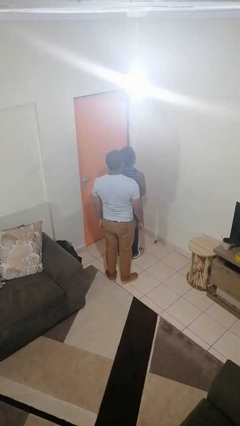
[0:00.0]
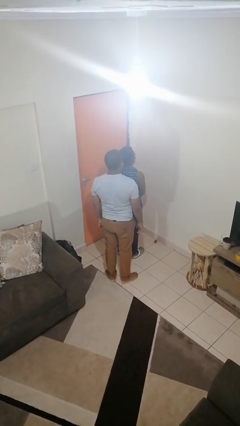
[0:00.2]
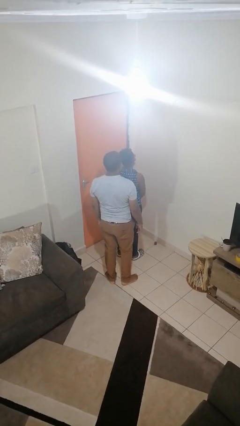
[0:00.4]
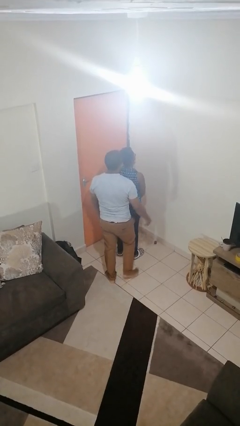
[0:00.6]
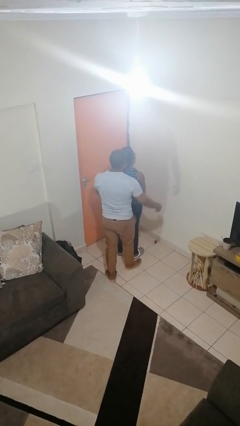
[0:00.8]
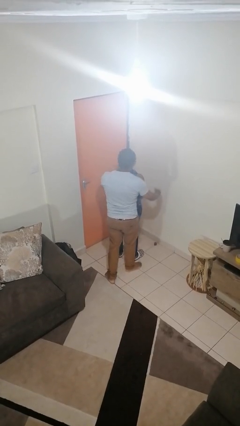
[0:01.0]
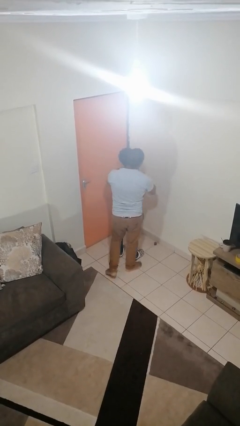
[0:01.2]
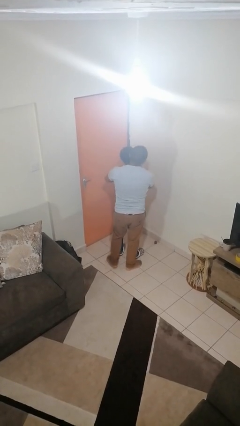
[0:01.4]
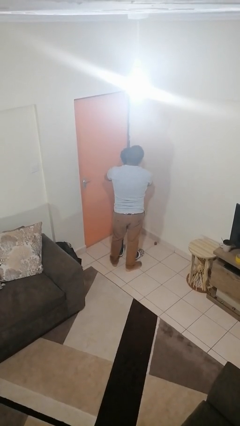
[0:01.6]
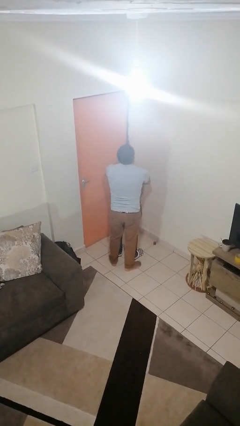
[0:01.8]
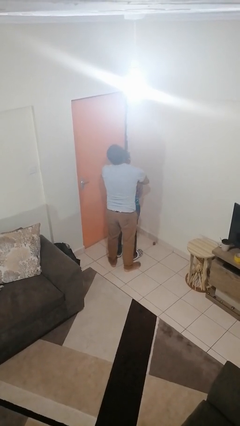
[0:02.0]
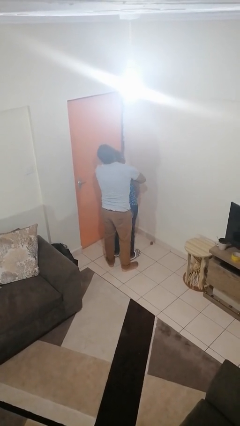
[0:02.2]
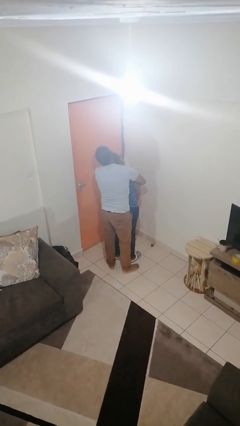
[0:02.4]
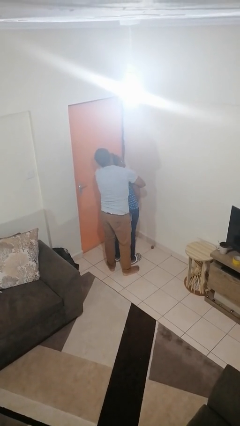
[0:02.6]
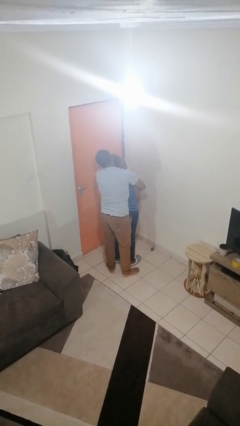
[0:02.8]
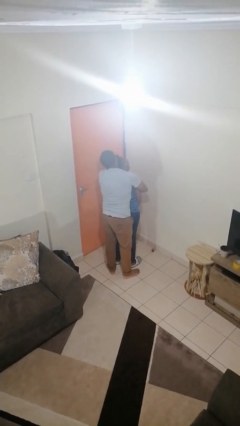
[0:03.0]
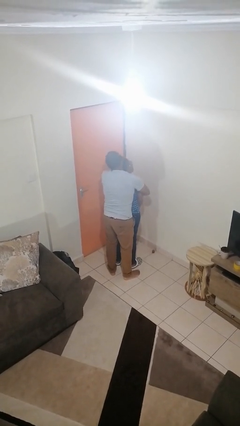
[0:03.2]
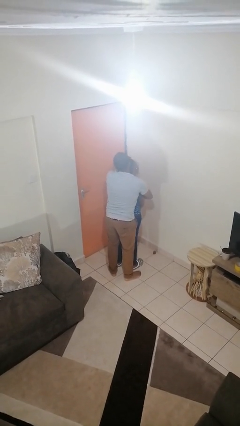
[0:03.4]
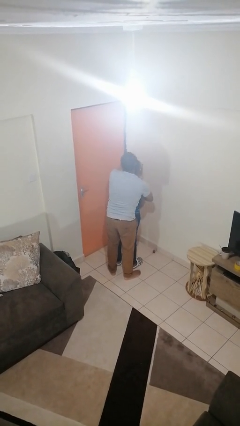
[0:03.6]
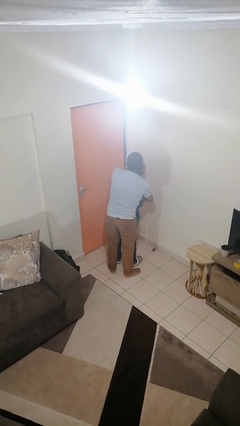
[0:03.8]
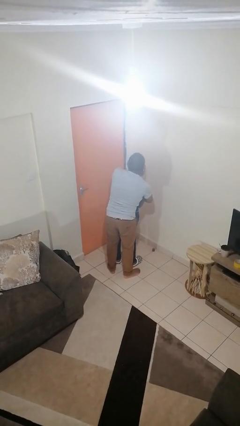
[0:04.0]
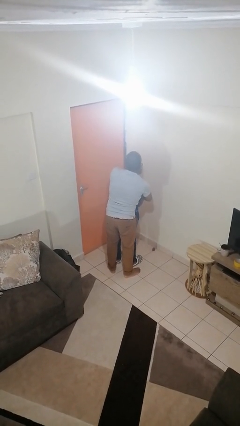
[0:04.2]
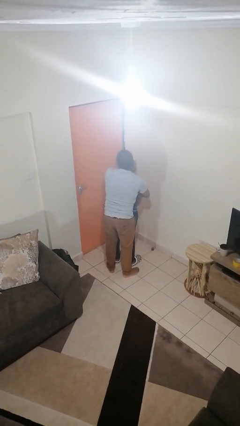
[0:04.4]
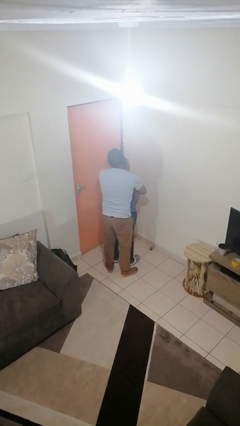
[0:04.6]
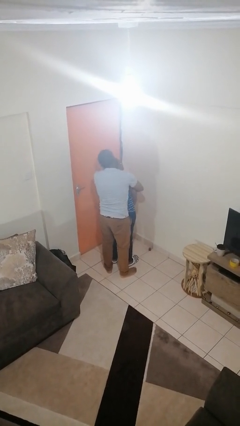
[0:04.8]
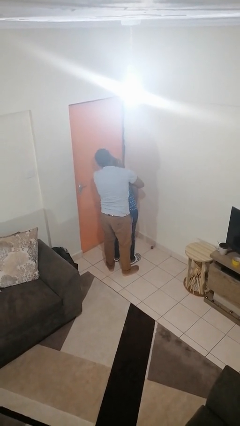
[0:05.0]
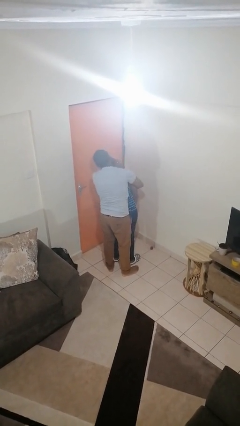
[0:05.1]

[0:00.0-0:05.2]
person hugs person from behind

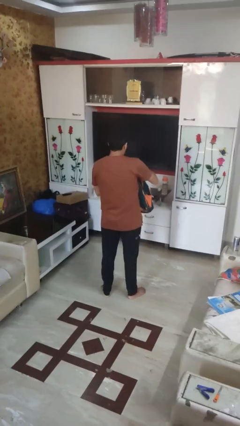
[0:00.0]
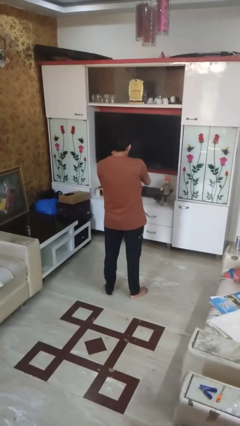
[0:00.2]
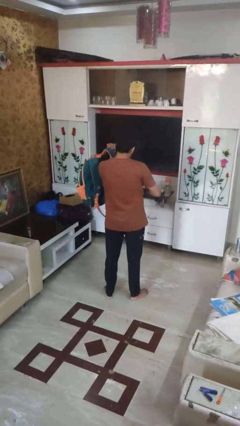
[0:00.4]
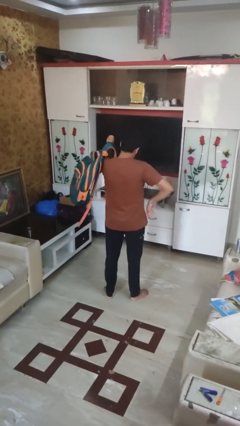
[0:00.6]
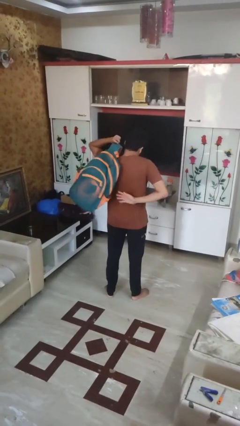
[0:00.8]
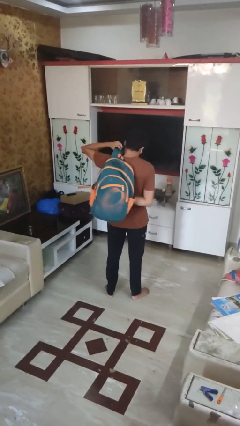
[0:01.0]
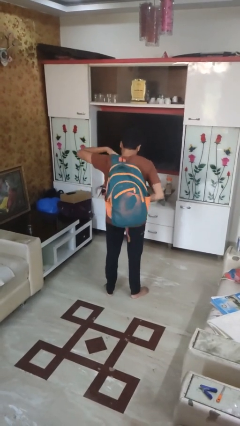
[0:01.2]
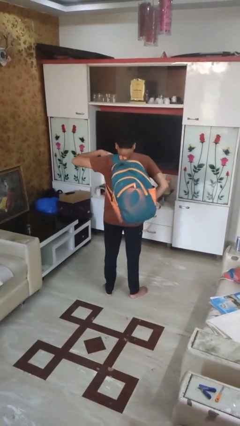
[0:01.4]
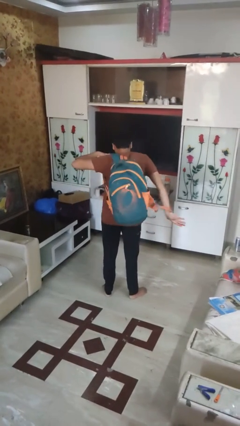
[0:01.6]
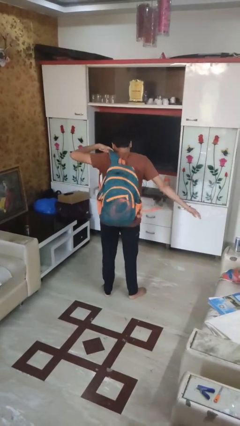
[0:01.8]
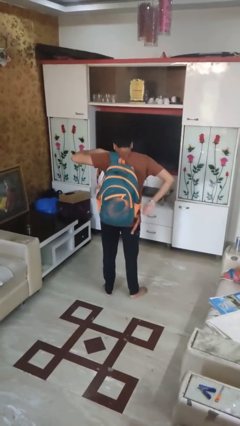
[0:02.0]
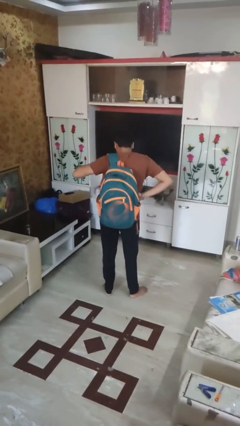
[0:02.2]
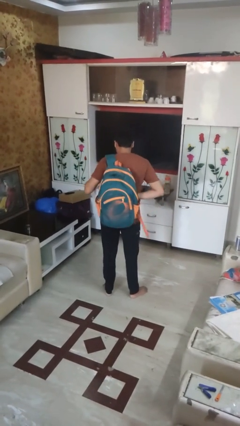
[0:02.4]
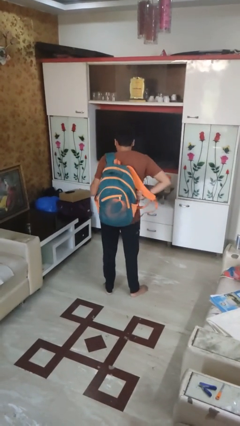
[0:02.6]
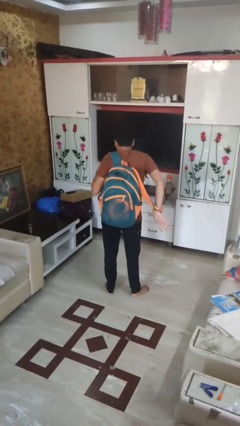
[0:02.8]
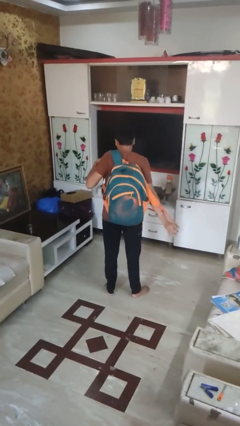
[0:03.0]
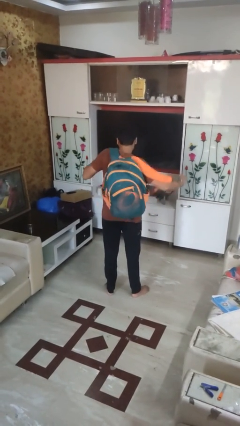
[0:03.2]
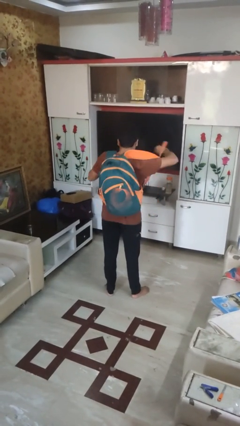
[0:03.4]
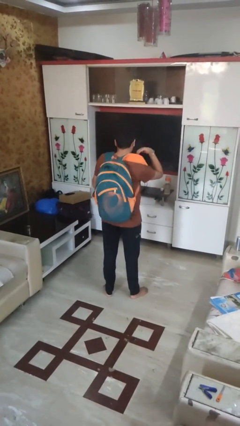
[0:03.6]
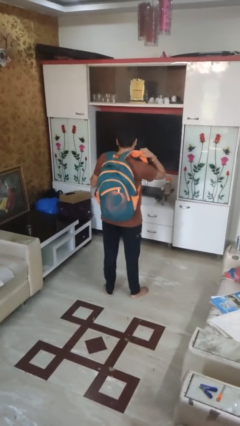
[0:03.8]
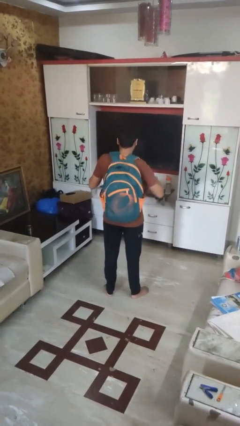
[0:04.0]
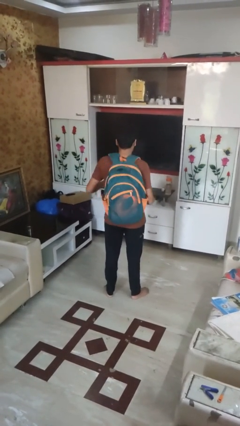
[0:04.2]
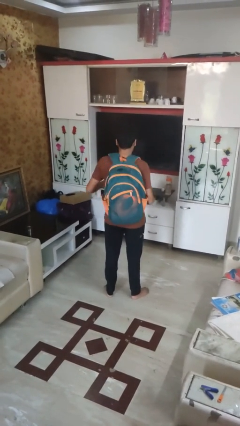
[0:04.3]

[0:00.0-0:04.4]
person puts on backpack

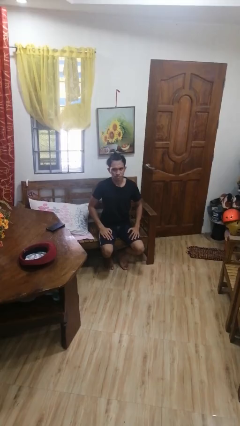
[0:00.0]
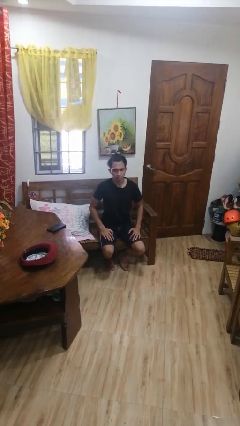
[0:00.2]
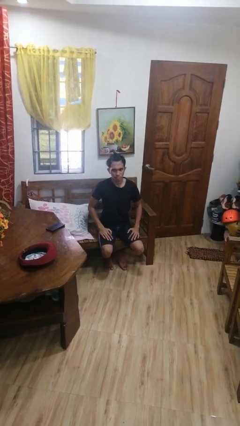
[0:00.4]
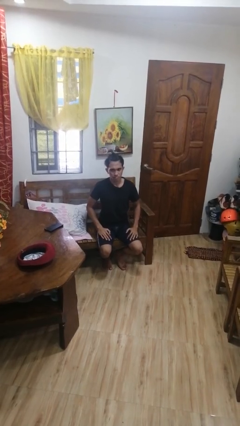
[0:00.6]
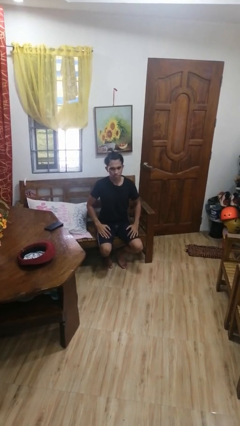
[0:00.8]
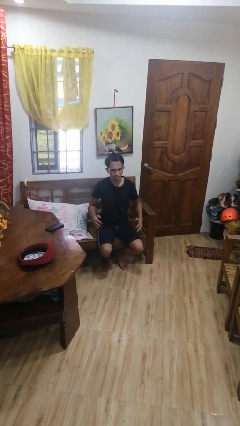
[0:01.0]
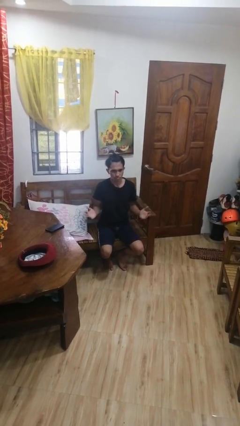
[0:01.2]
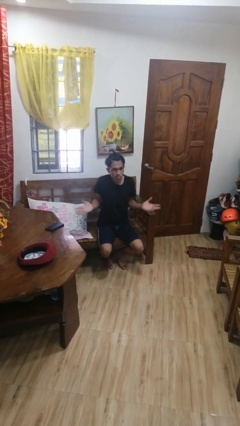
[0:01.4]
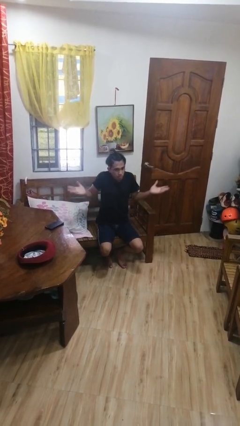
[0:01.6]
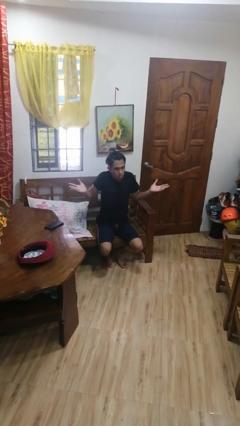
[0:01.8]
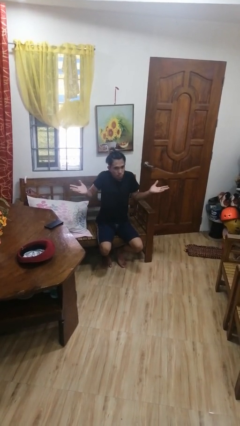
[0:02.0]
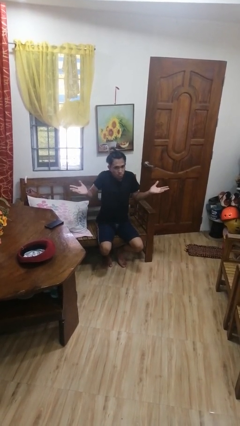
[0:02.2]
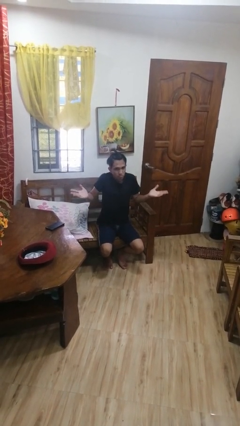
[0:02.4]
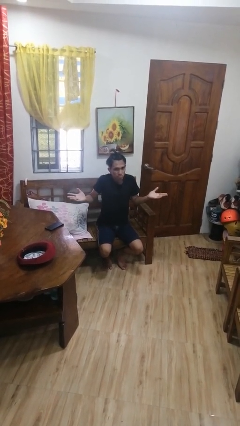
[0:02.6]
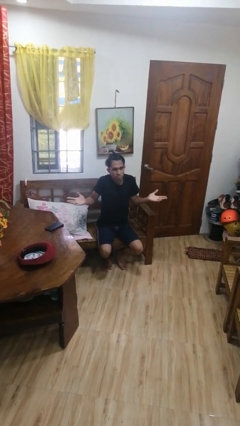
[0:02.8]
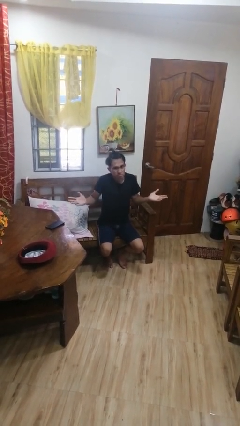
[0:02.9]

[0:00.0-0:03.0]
person shrugs

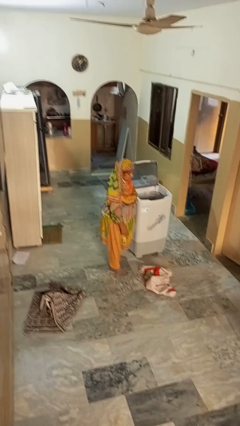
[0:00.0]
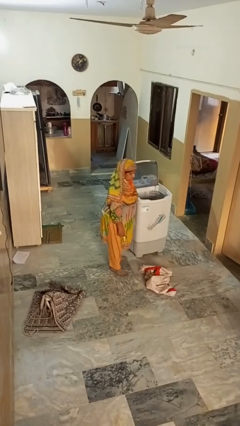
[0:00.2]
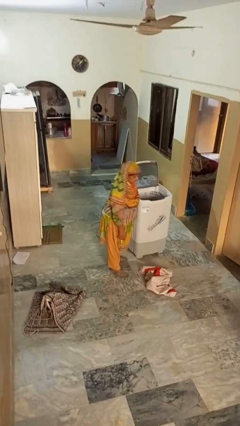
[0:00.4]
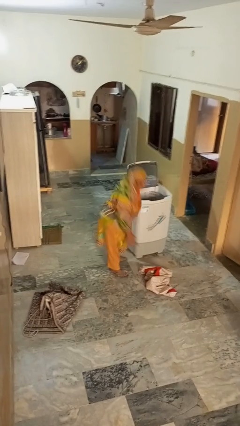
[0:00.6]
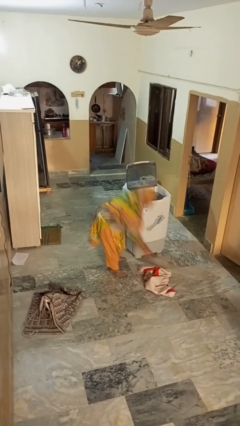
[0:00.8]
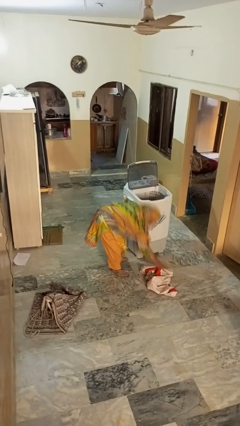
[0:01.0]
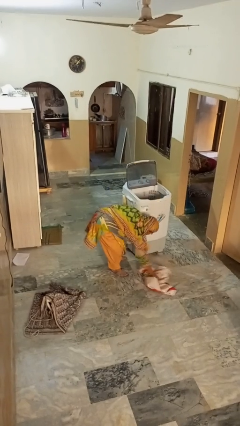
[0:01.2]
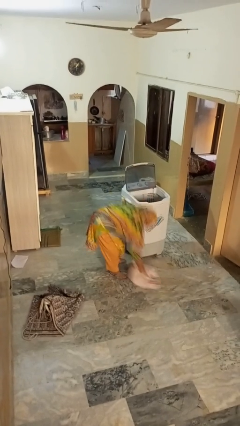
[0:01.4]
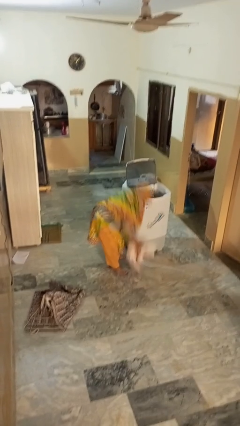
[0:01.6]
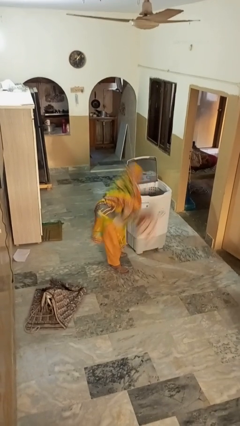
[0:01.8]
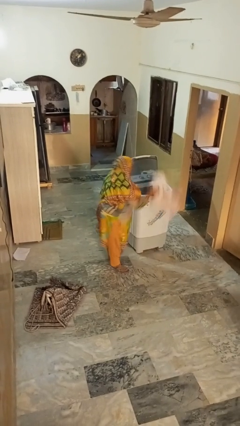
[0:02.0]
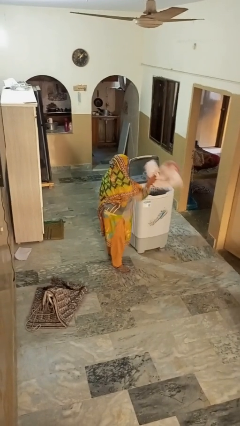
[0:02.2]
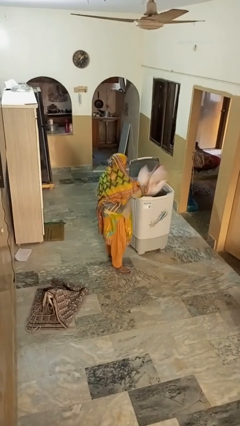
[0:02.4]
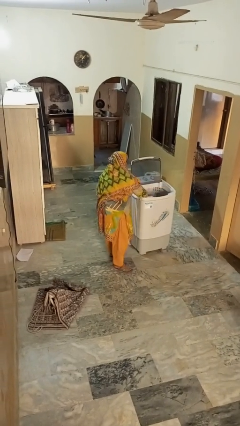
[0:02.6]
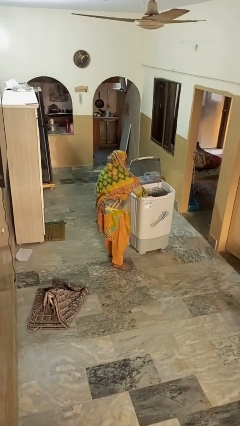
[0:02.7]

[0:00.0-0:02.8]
person loads clotheswasher

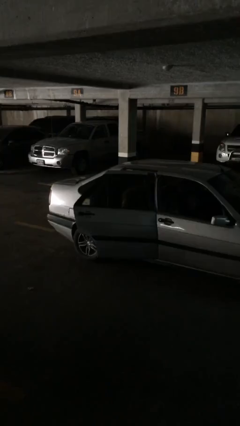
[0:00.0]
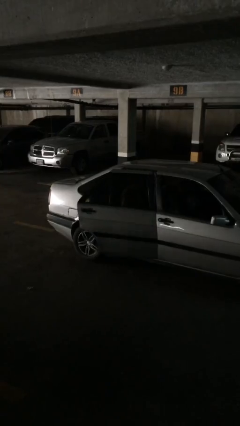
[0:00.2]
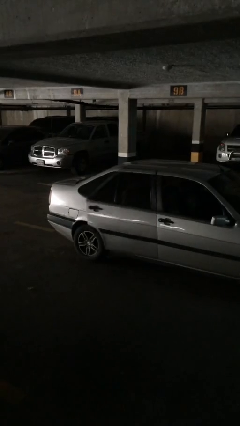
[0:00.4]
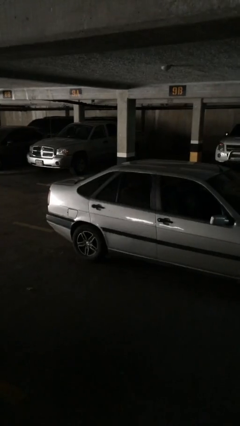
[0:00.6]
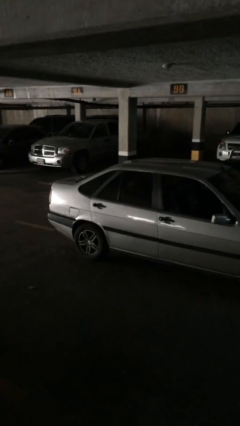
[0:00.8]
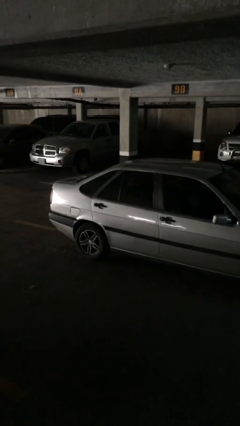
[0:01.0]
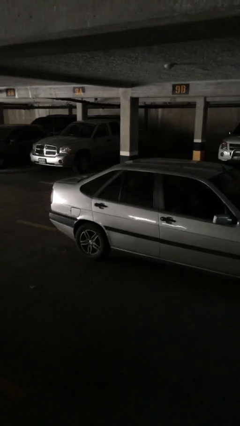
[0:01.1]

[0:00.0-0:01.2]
person closes car door

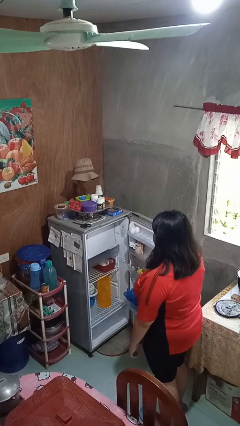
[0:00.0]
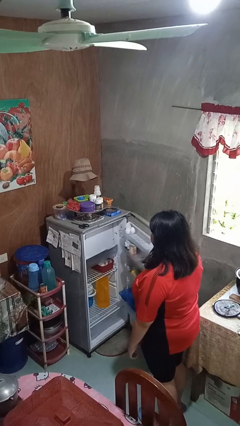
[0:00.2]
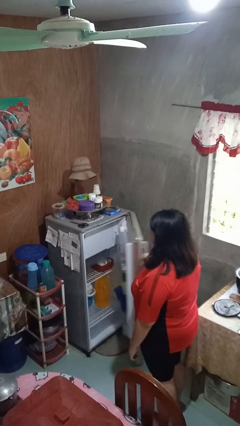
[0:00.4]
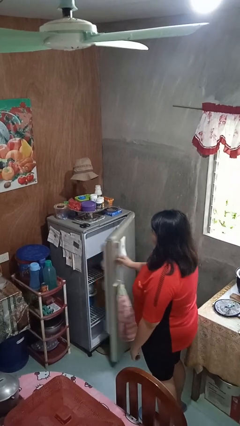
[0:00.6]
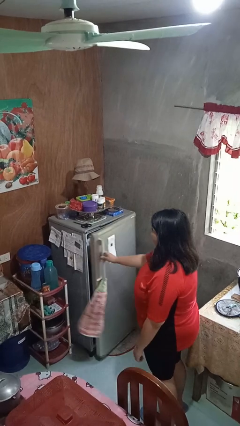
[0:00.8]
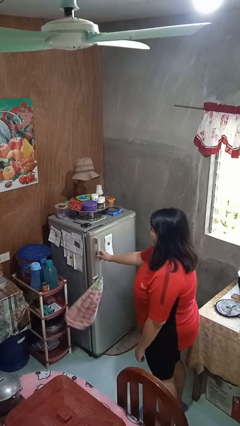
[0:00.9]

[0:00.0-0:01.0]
person closes refrigerator
